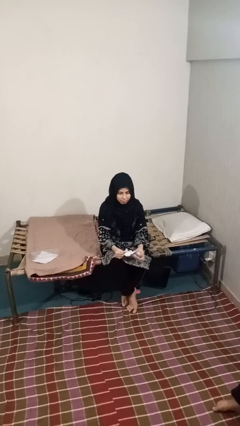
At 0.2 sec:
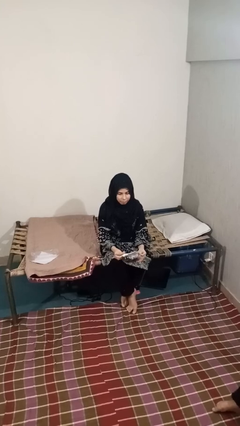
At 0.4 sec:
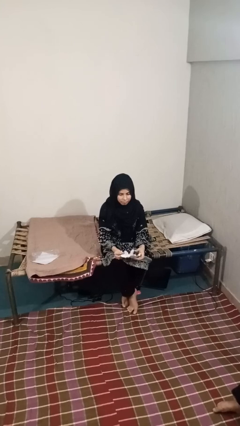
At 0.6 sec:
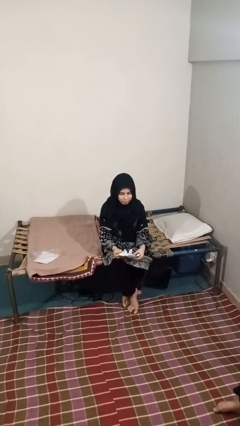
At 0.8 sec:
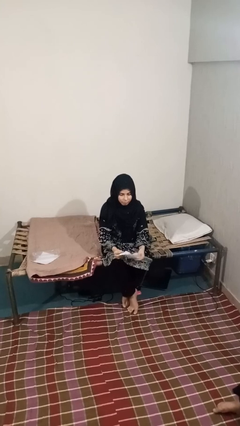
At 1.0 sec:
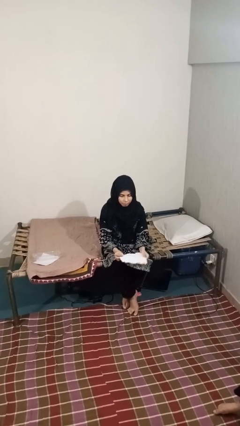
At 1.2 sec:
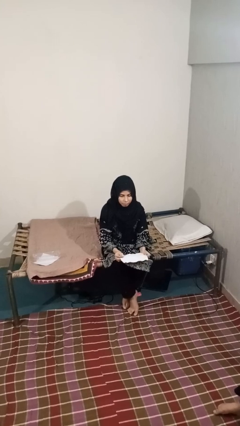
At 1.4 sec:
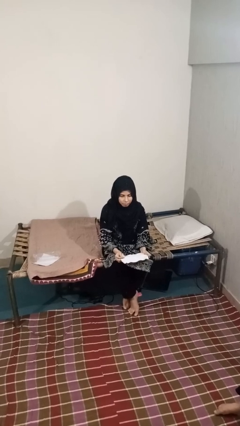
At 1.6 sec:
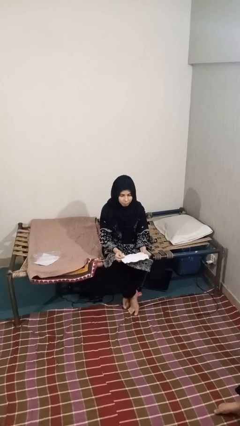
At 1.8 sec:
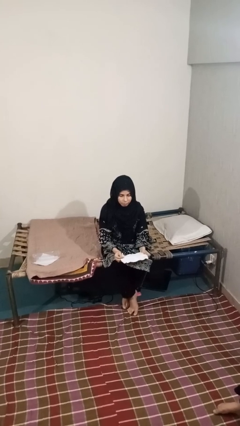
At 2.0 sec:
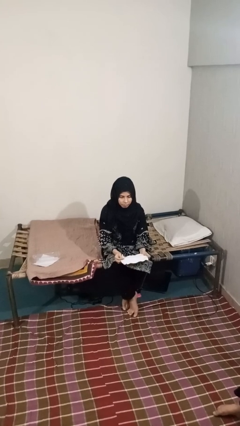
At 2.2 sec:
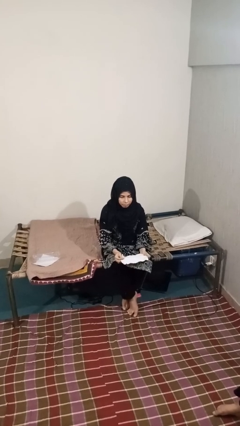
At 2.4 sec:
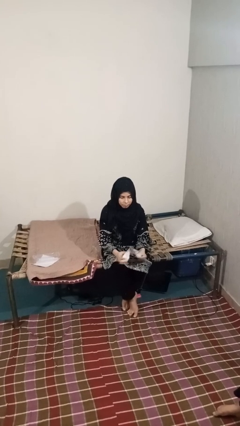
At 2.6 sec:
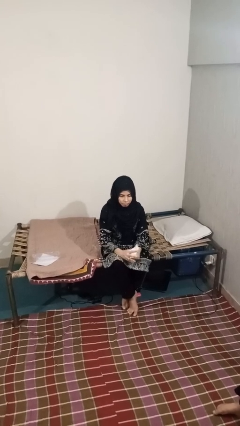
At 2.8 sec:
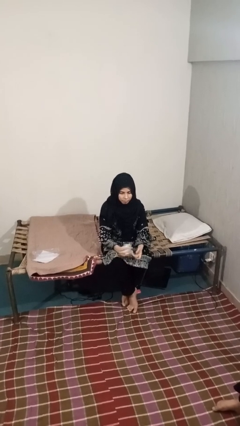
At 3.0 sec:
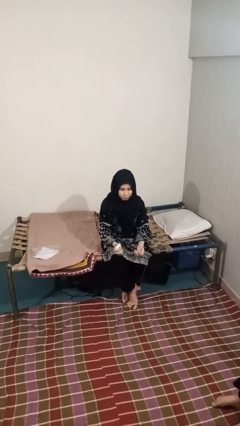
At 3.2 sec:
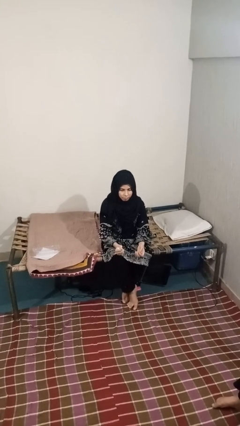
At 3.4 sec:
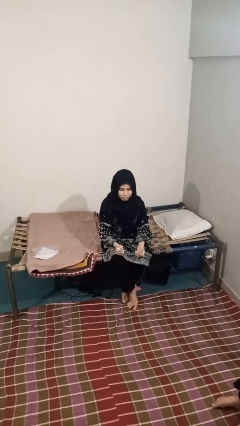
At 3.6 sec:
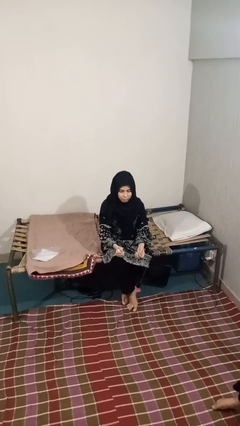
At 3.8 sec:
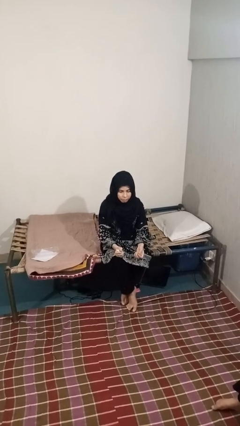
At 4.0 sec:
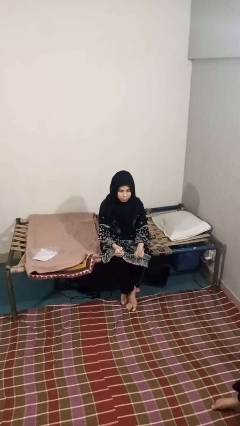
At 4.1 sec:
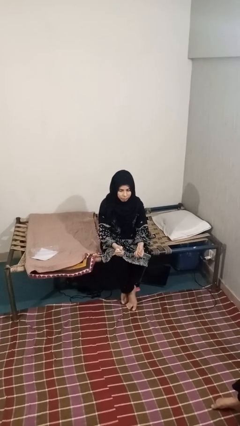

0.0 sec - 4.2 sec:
person crumples paper

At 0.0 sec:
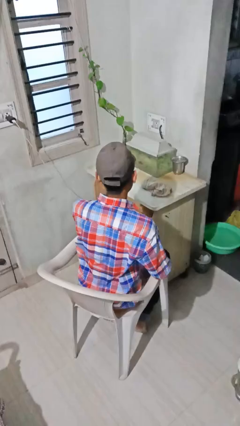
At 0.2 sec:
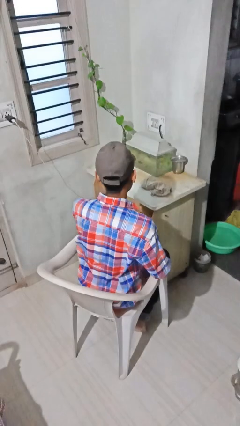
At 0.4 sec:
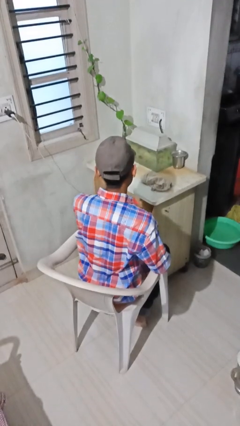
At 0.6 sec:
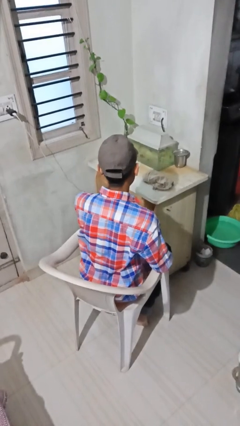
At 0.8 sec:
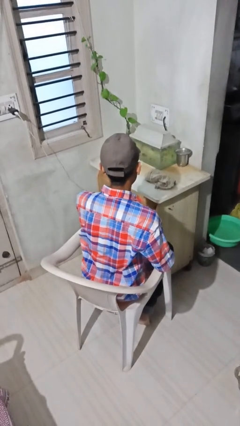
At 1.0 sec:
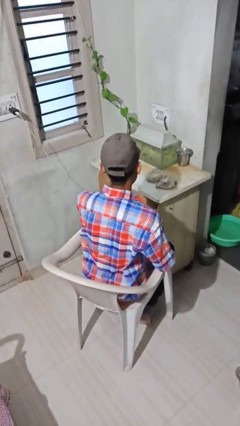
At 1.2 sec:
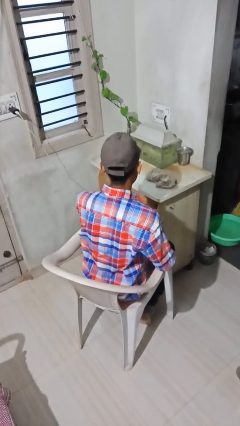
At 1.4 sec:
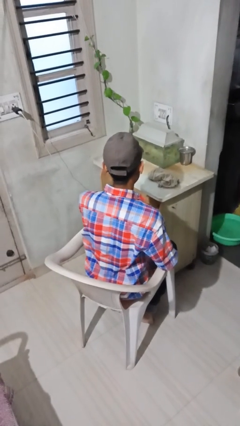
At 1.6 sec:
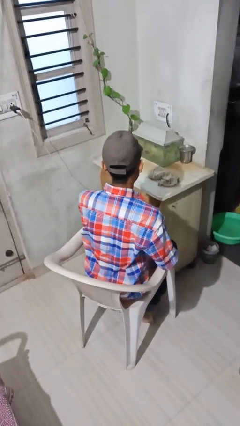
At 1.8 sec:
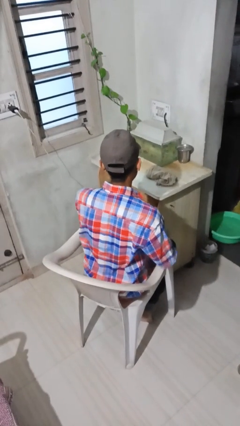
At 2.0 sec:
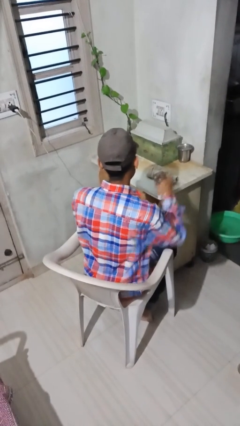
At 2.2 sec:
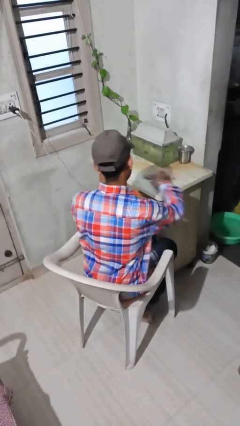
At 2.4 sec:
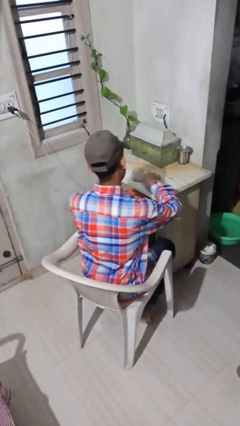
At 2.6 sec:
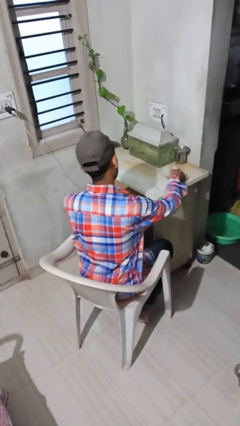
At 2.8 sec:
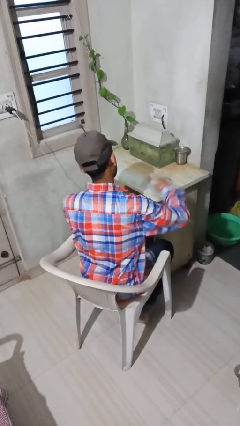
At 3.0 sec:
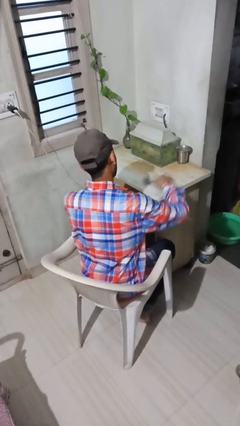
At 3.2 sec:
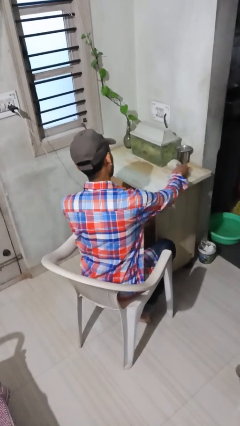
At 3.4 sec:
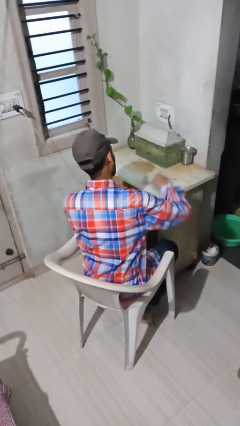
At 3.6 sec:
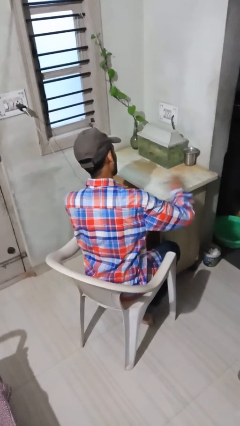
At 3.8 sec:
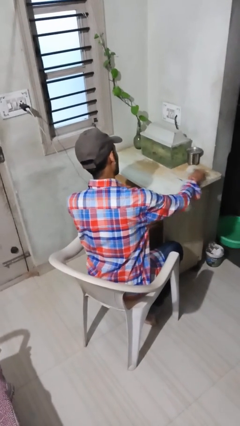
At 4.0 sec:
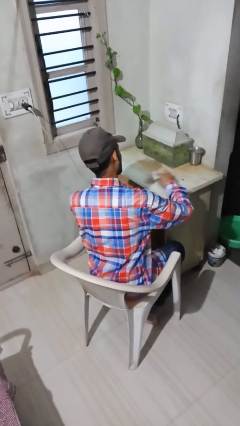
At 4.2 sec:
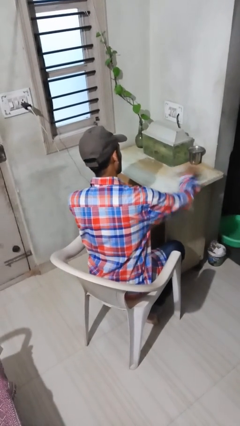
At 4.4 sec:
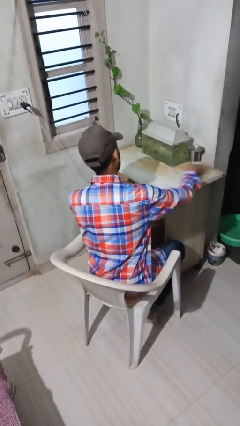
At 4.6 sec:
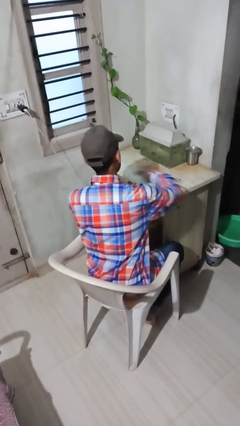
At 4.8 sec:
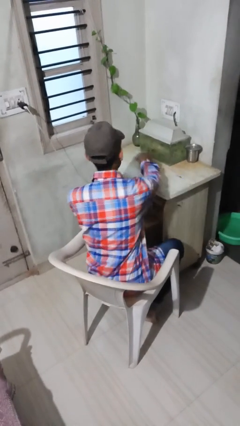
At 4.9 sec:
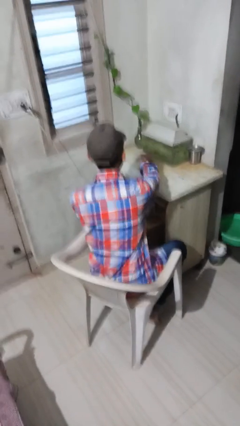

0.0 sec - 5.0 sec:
person cleans table with rag

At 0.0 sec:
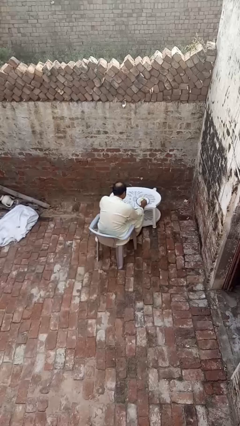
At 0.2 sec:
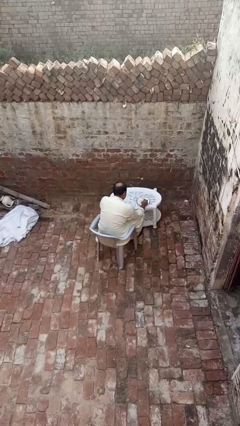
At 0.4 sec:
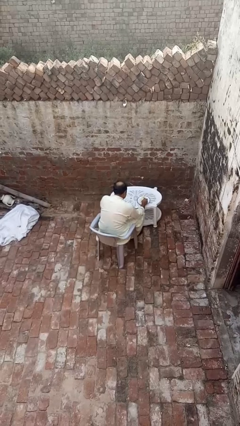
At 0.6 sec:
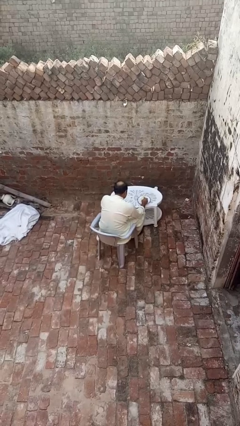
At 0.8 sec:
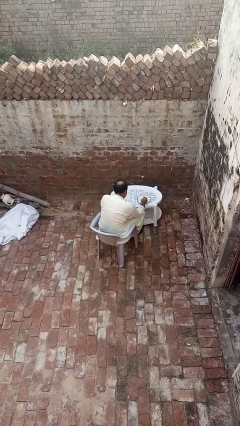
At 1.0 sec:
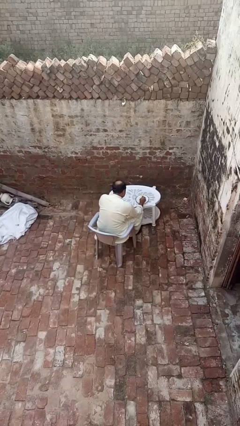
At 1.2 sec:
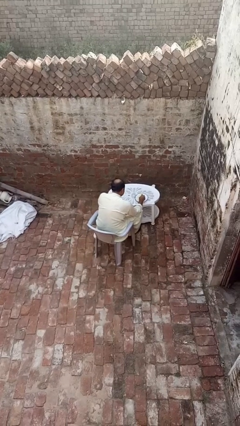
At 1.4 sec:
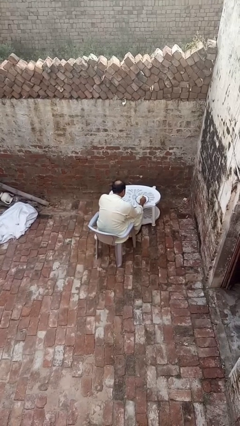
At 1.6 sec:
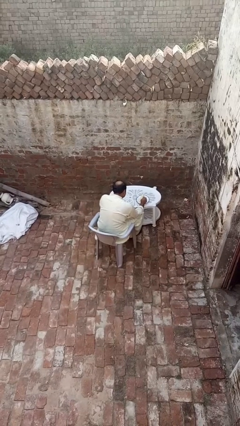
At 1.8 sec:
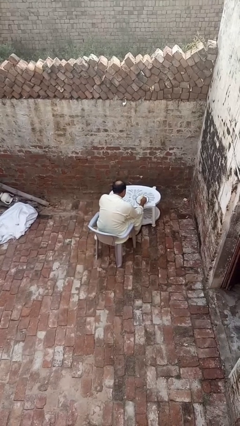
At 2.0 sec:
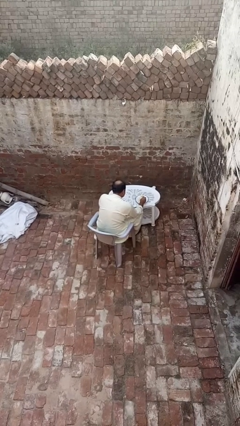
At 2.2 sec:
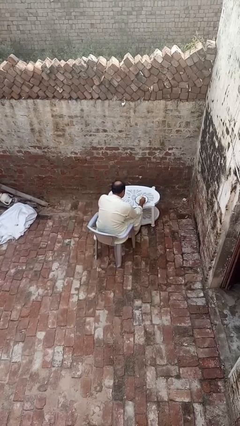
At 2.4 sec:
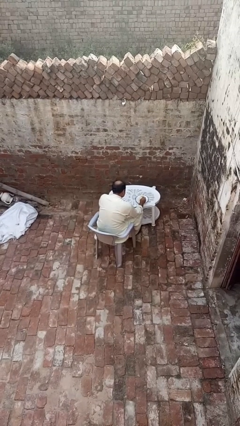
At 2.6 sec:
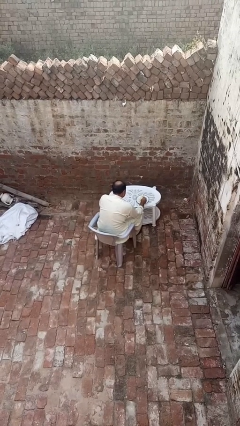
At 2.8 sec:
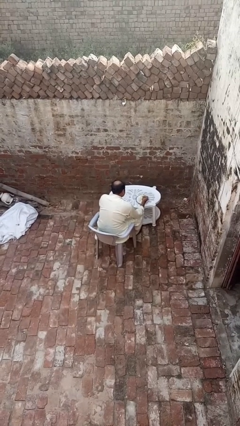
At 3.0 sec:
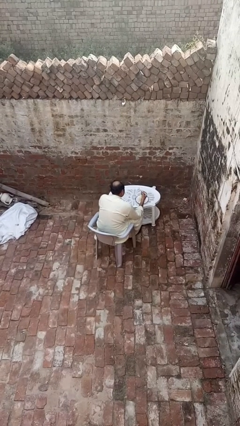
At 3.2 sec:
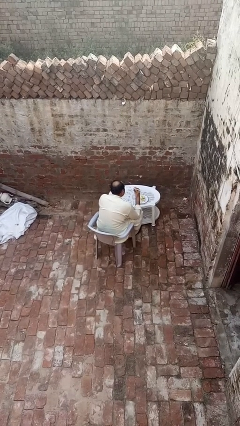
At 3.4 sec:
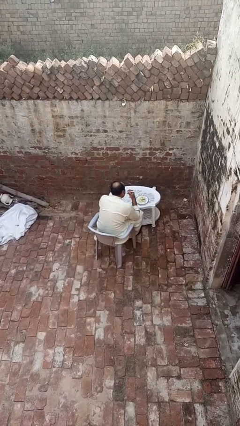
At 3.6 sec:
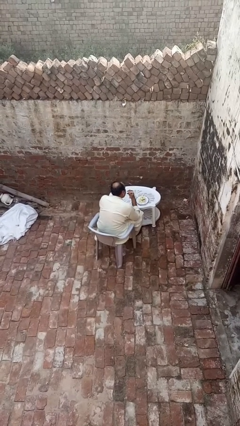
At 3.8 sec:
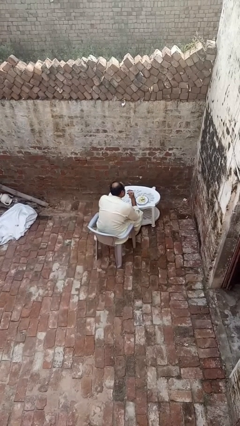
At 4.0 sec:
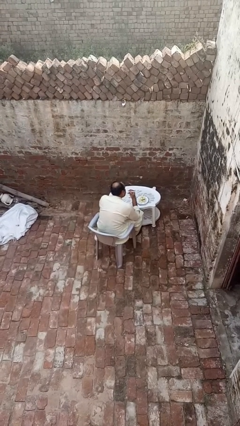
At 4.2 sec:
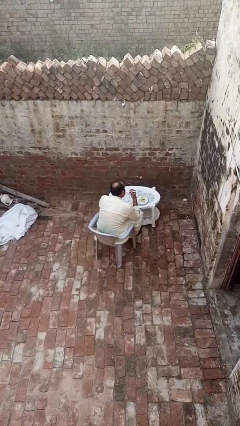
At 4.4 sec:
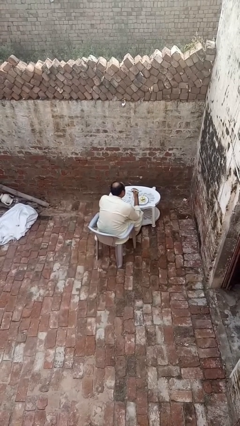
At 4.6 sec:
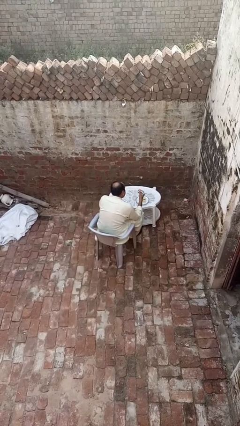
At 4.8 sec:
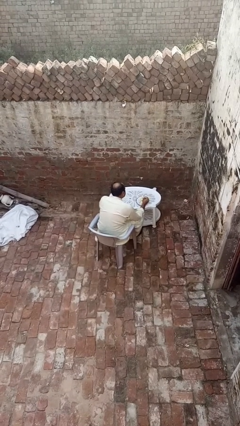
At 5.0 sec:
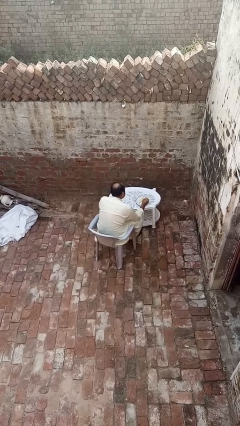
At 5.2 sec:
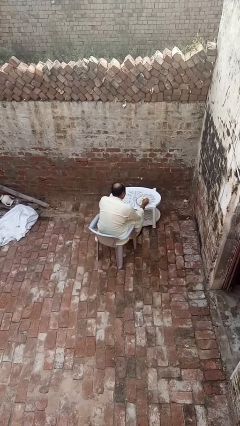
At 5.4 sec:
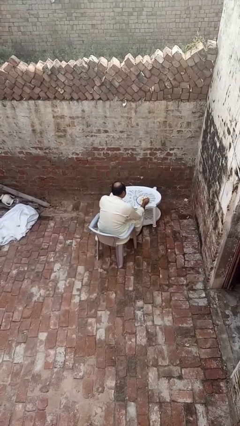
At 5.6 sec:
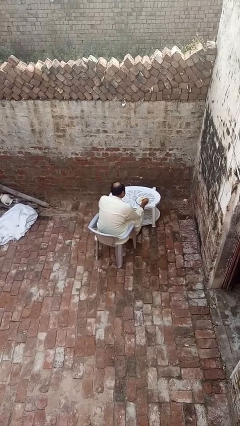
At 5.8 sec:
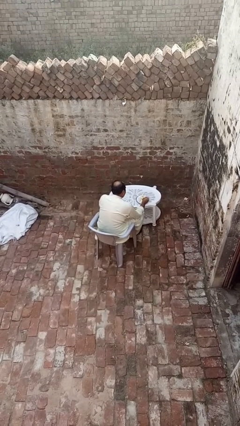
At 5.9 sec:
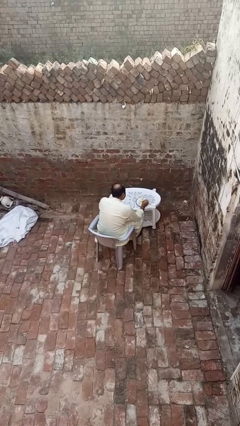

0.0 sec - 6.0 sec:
person eats with utensil

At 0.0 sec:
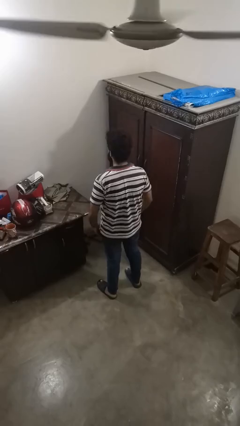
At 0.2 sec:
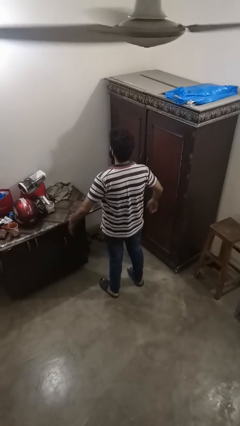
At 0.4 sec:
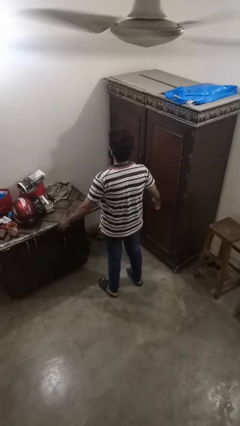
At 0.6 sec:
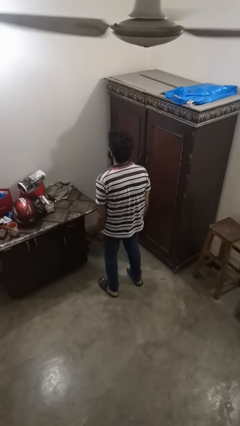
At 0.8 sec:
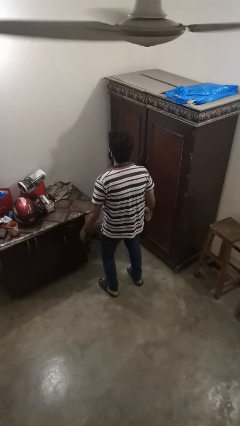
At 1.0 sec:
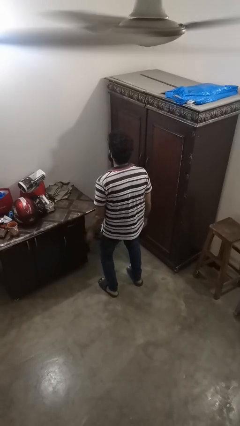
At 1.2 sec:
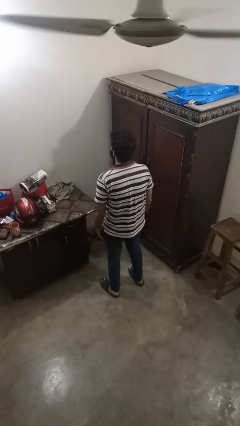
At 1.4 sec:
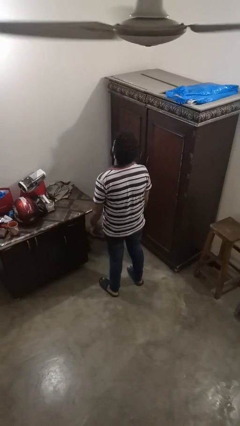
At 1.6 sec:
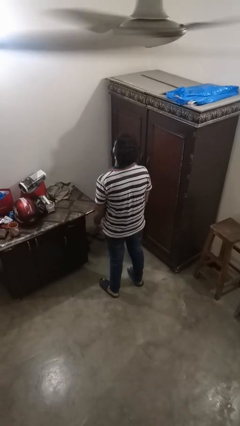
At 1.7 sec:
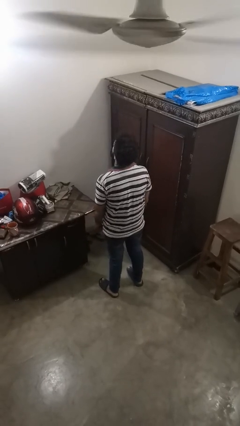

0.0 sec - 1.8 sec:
person slaps hands on thighs

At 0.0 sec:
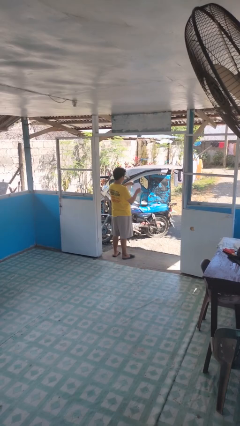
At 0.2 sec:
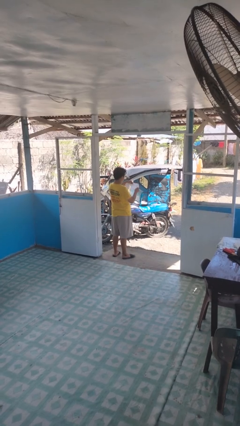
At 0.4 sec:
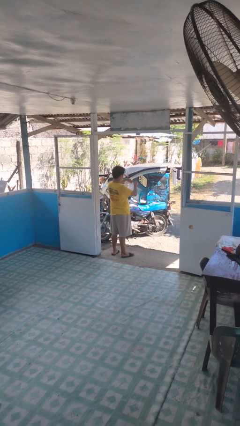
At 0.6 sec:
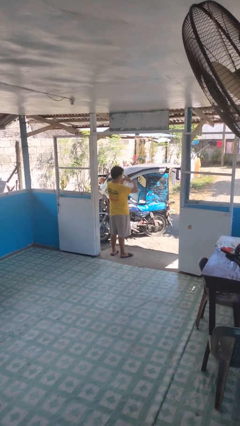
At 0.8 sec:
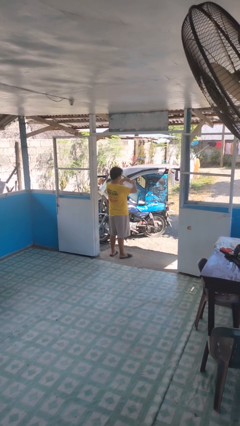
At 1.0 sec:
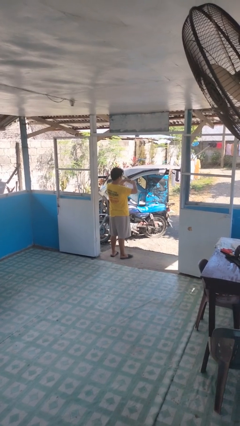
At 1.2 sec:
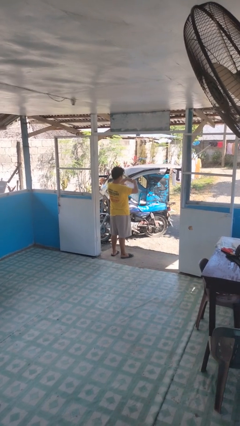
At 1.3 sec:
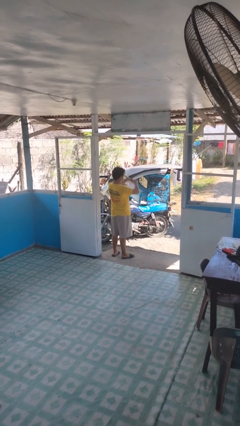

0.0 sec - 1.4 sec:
person tears paper
